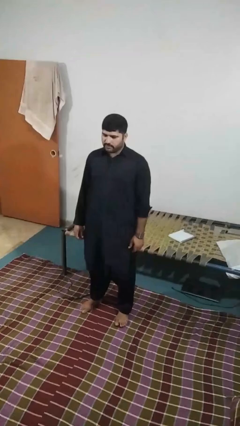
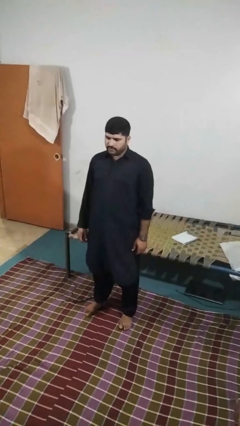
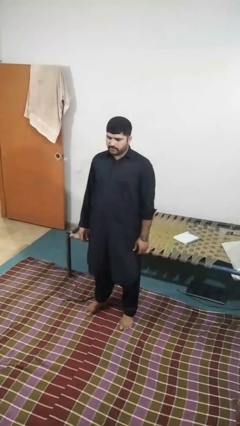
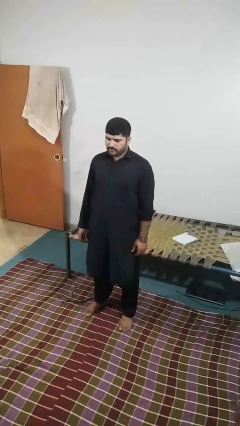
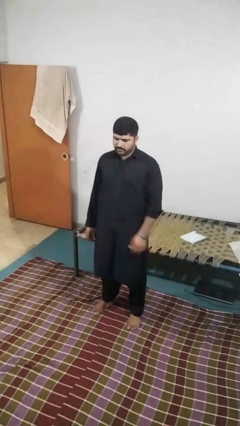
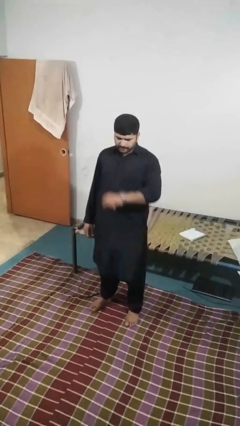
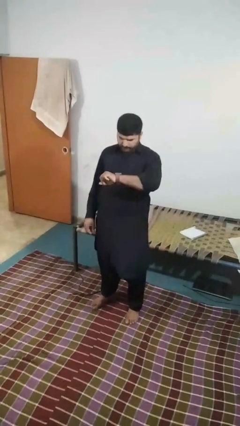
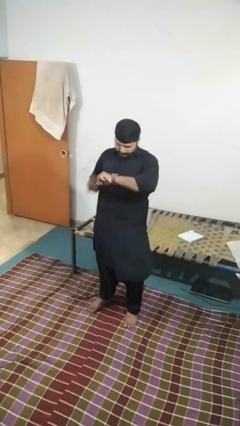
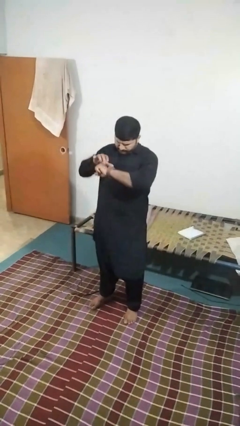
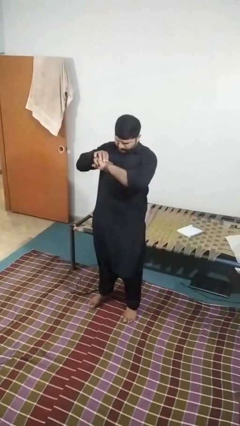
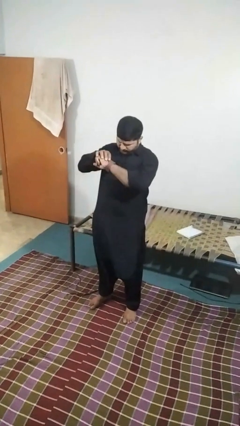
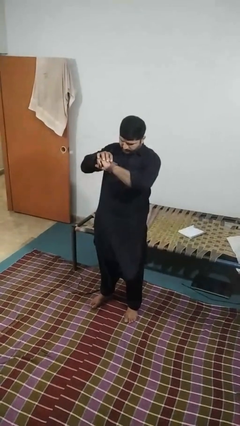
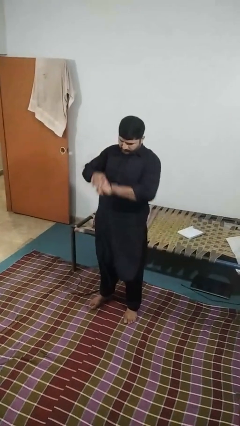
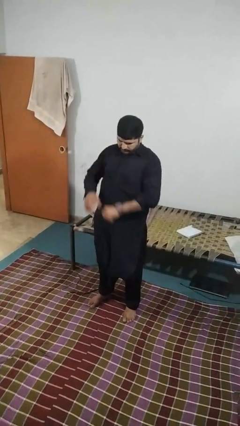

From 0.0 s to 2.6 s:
person looks at wristwatch

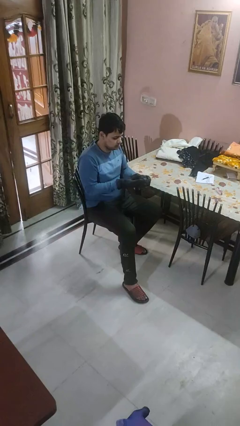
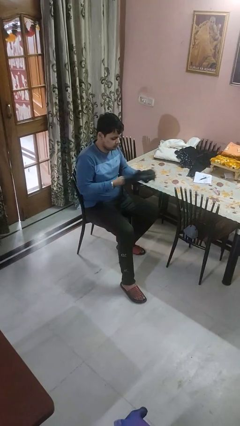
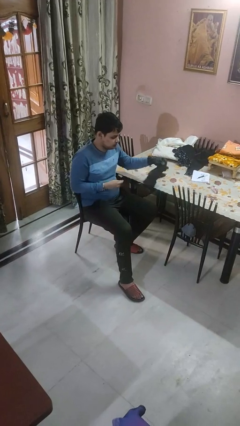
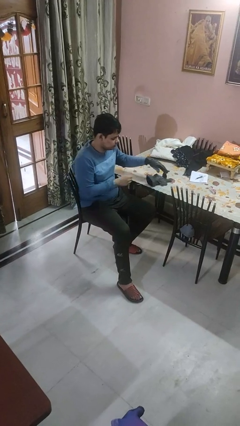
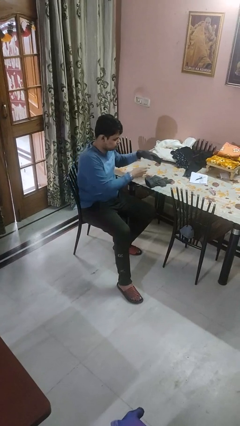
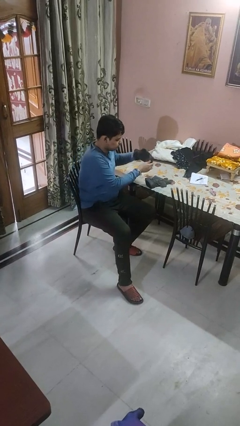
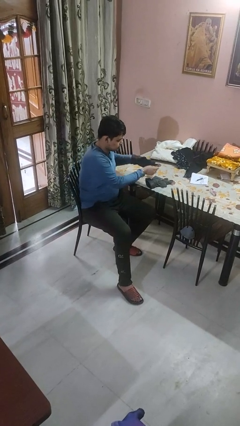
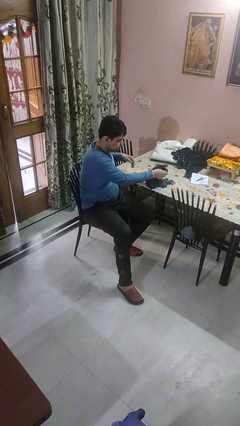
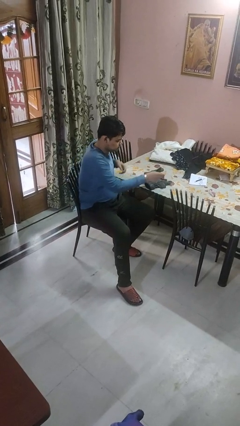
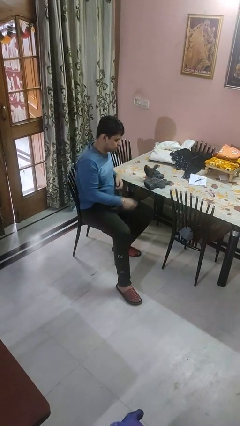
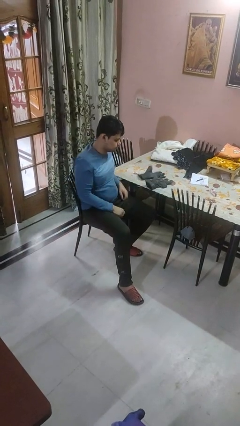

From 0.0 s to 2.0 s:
person takes off gloves

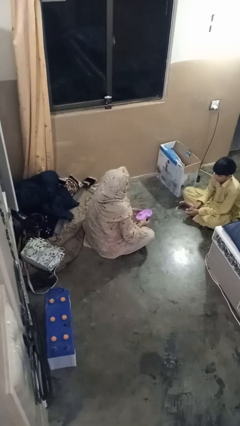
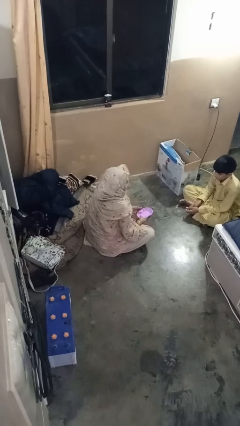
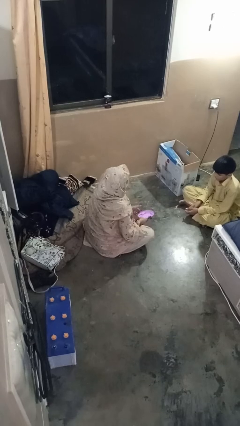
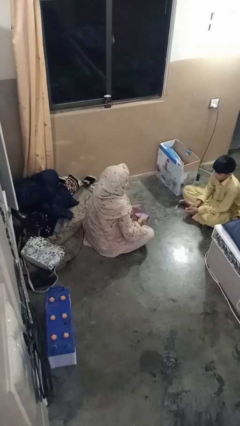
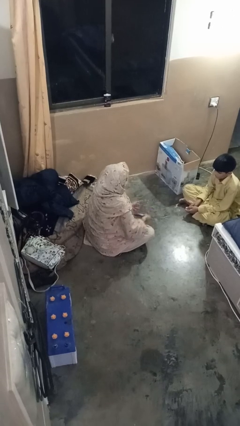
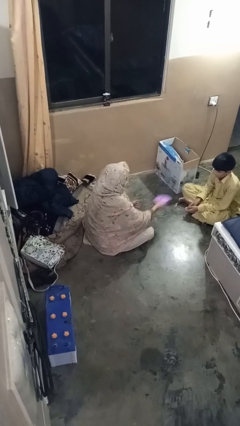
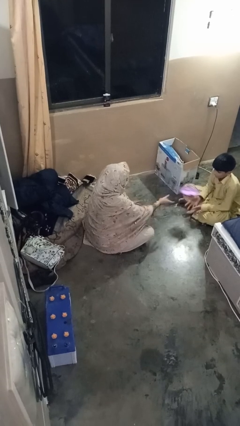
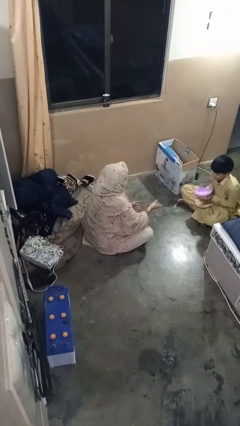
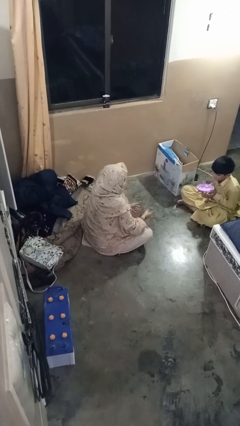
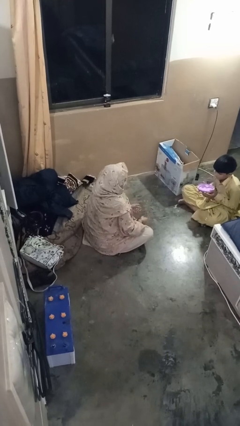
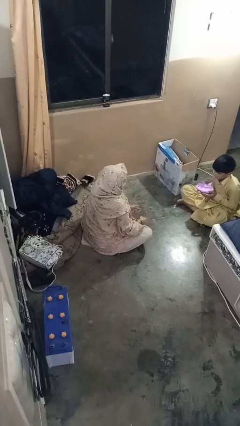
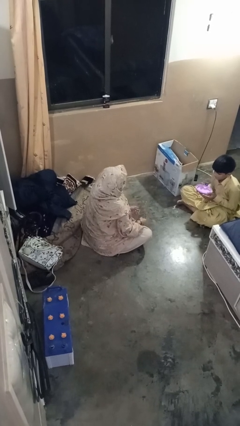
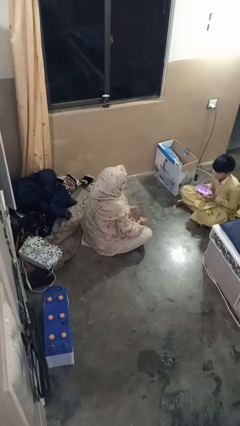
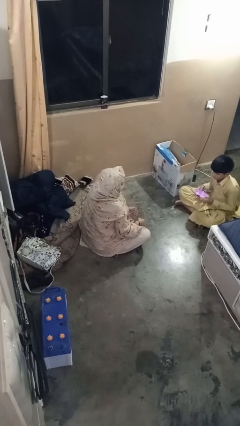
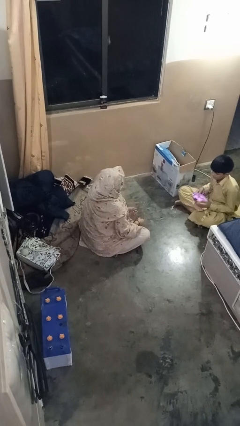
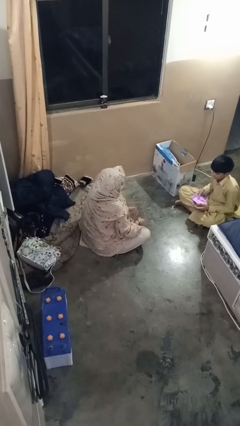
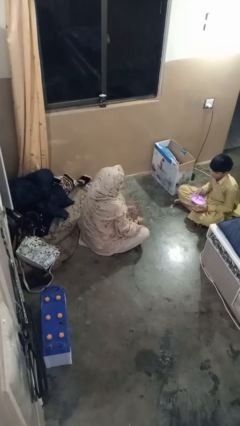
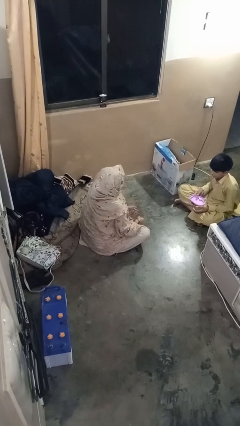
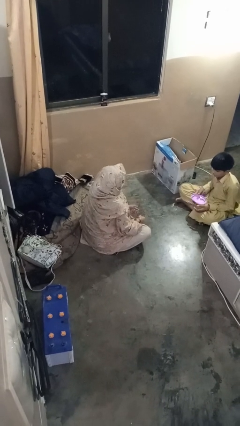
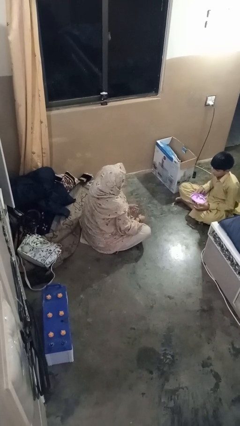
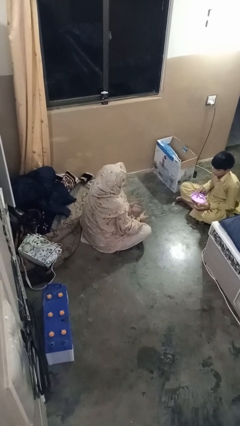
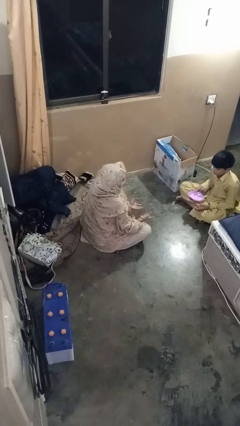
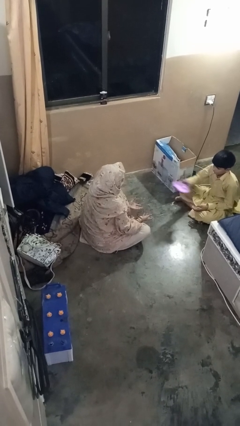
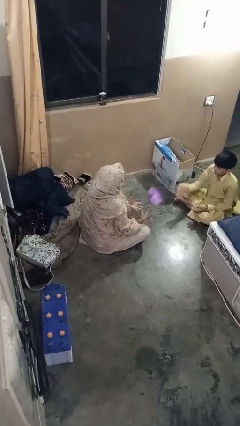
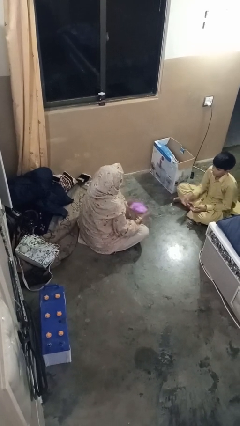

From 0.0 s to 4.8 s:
person throws object to person

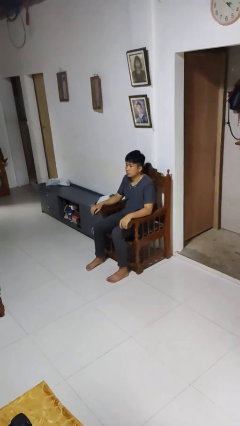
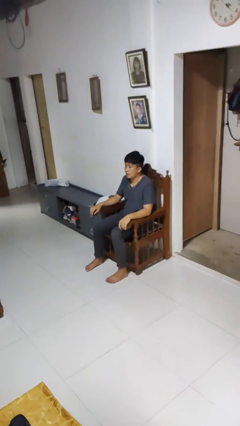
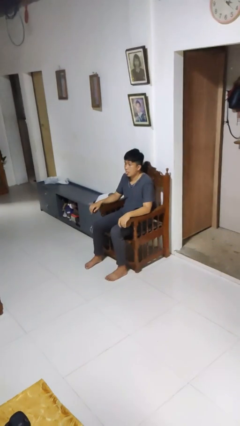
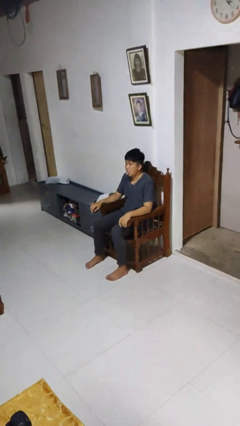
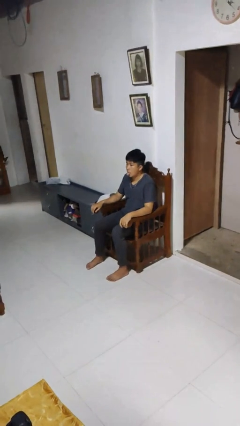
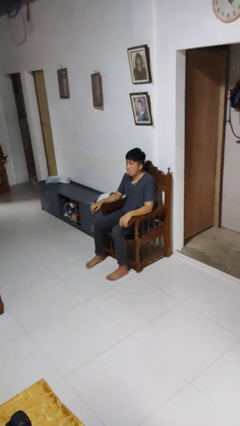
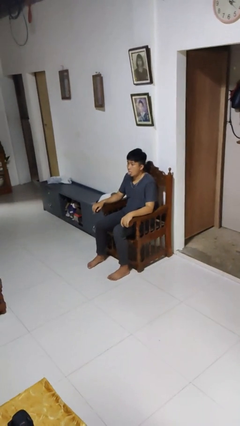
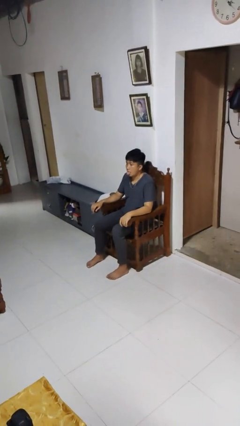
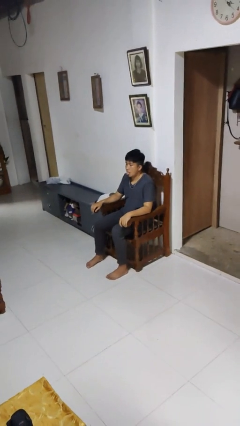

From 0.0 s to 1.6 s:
person sticks out tongue

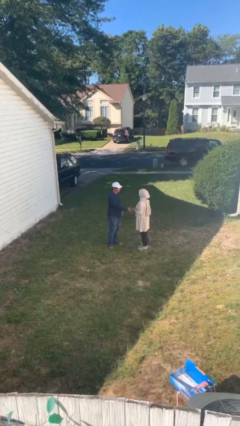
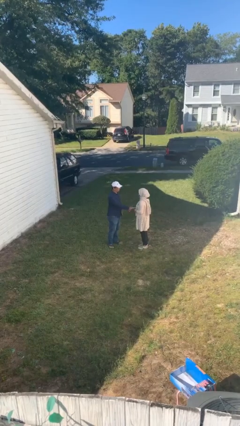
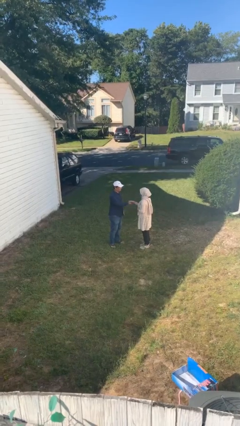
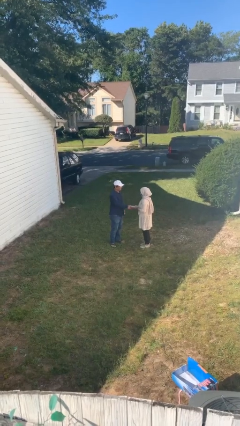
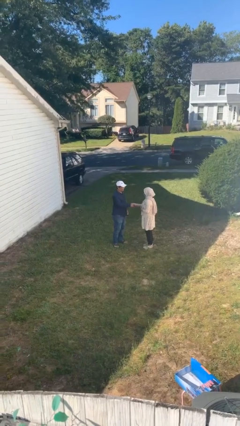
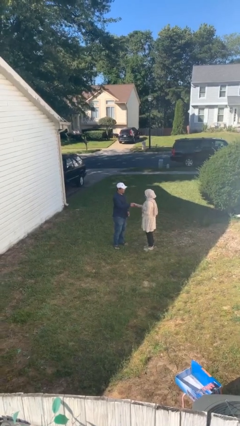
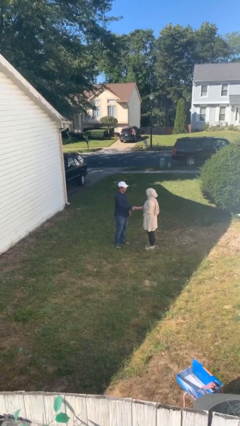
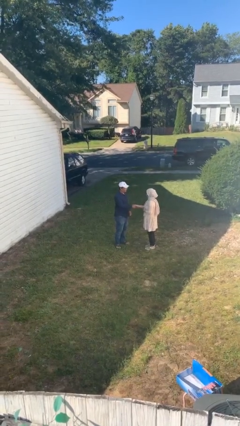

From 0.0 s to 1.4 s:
person shakes hand

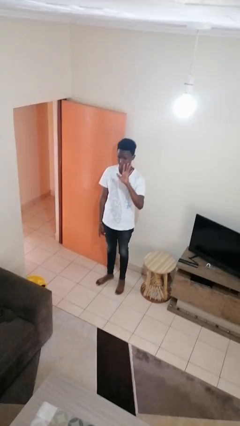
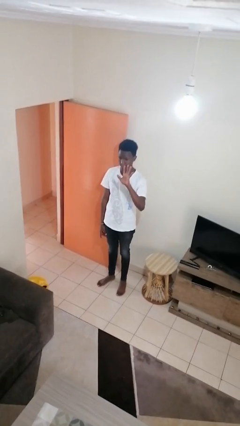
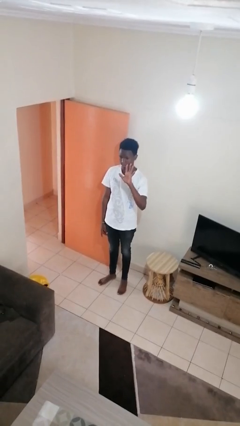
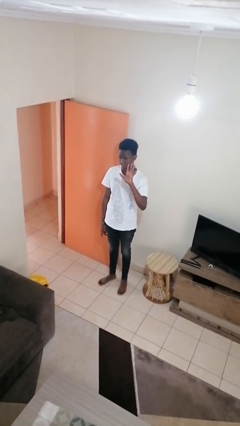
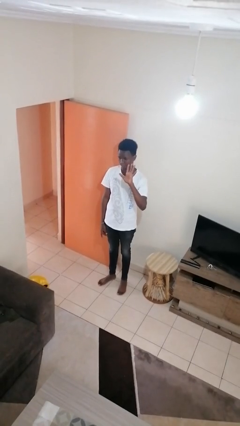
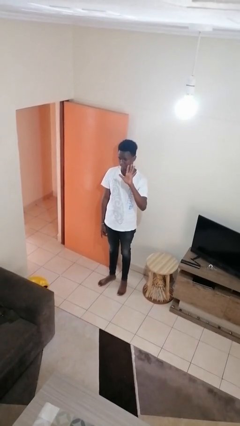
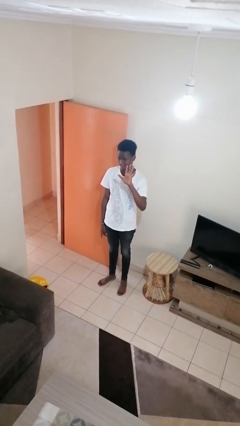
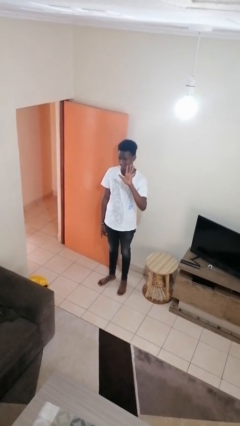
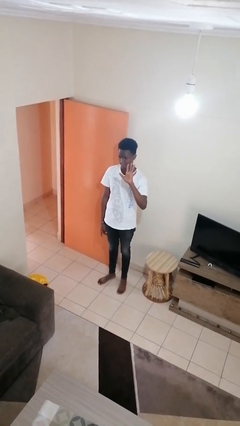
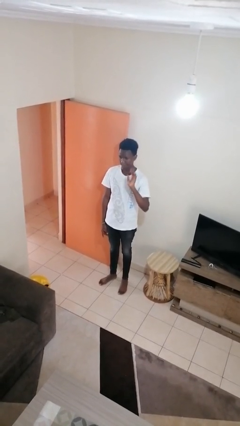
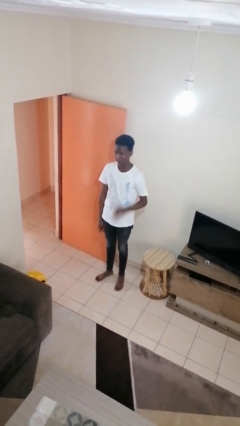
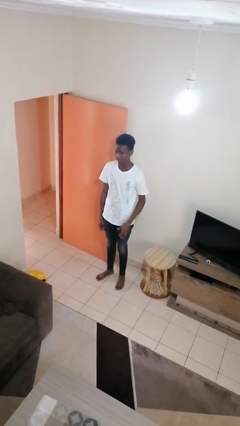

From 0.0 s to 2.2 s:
person gestures number five

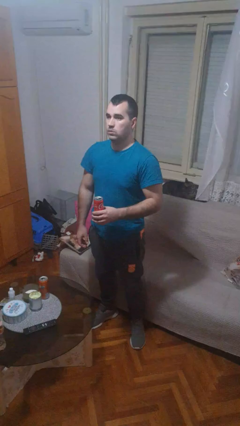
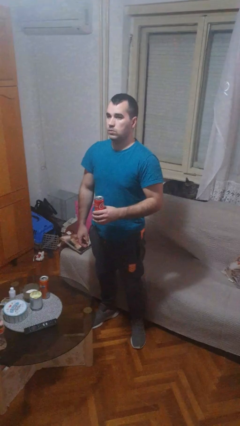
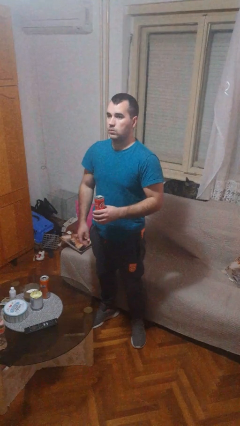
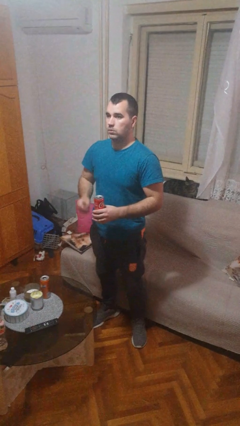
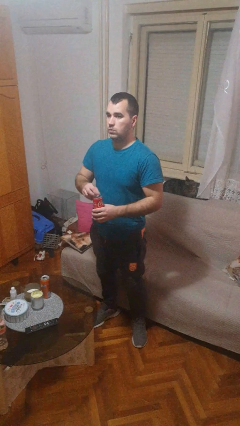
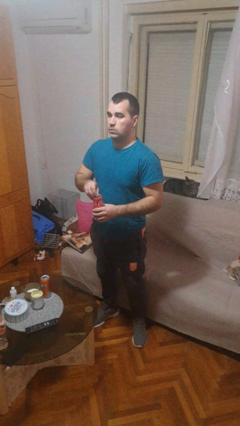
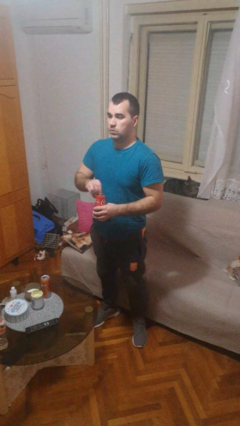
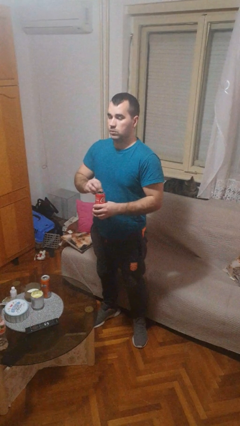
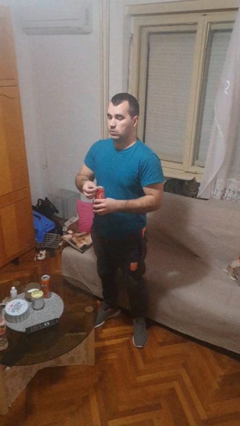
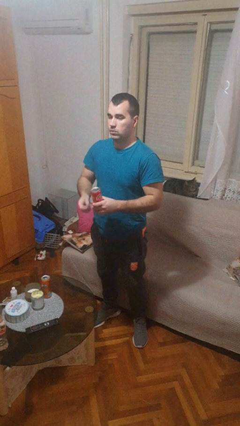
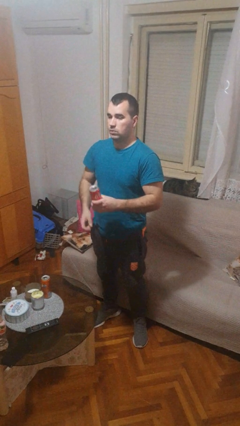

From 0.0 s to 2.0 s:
person opens beverage can
